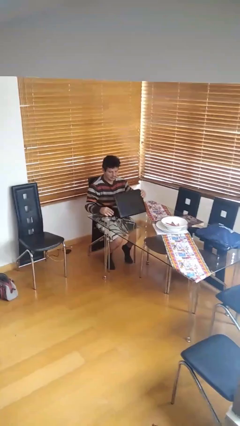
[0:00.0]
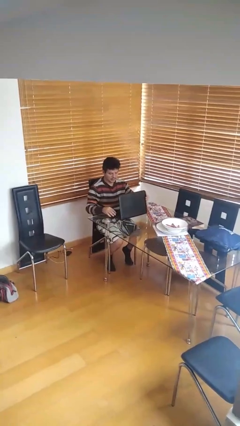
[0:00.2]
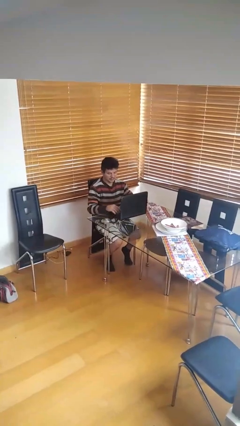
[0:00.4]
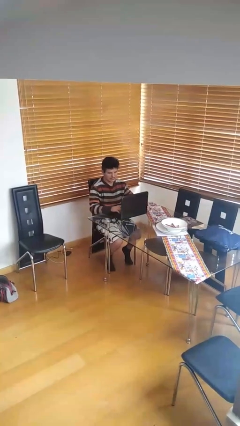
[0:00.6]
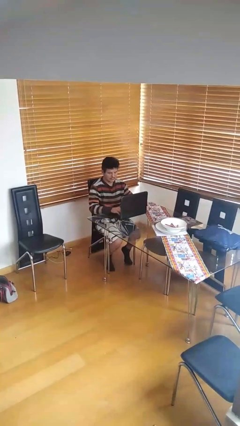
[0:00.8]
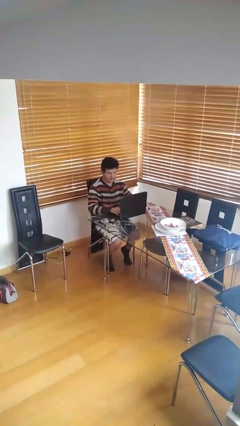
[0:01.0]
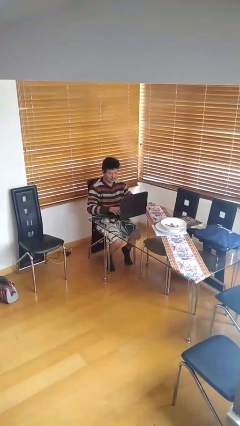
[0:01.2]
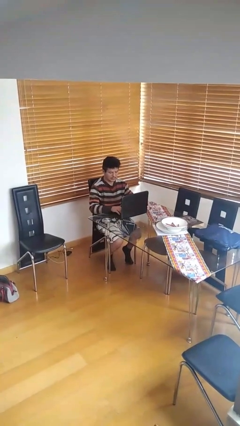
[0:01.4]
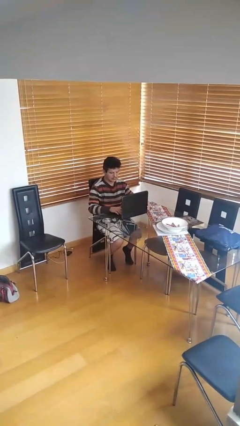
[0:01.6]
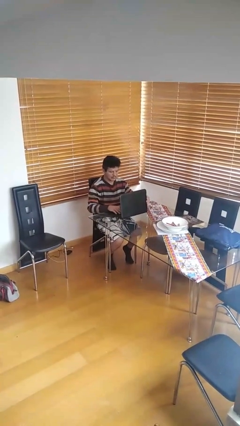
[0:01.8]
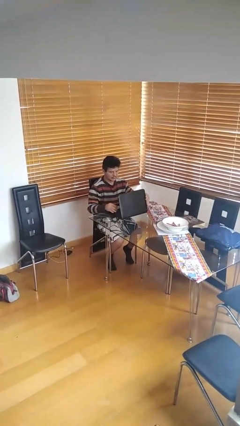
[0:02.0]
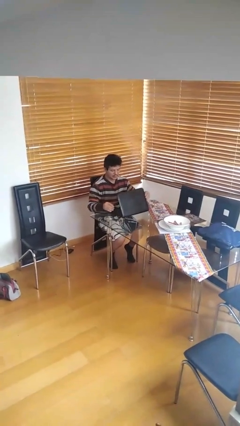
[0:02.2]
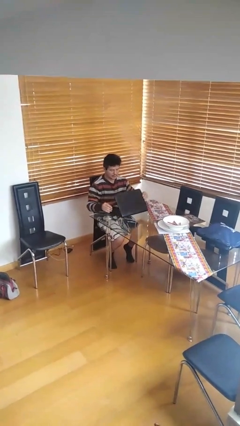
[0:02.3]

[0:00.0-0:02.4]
person interacts with laptop

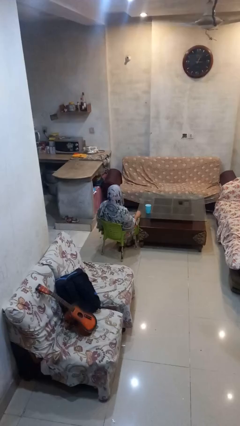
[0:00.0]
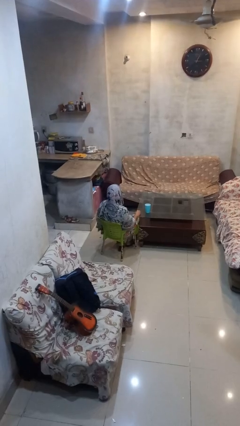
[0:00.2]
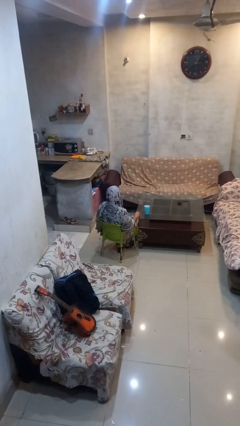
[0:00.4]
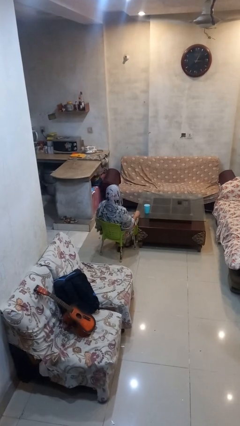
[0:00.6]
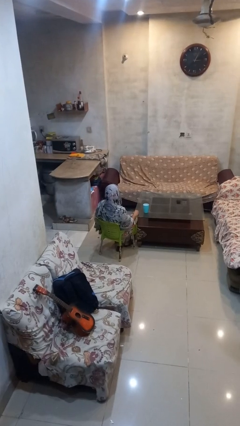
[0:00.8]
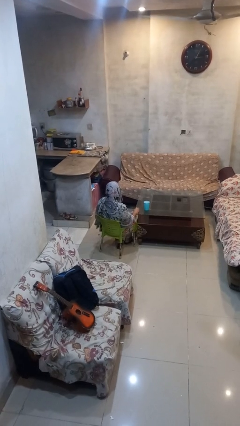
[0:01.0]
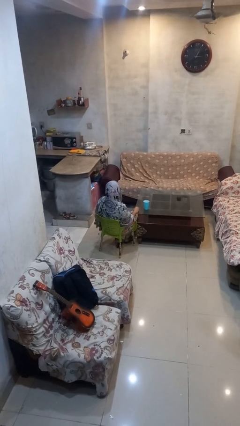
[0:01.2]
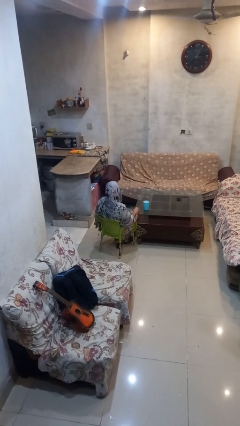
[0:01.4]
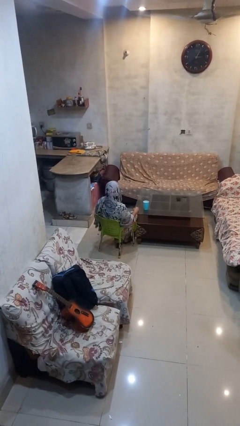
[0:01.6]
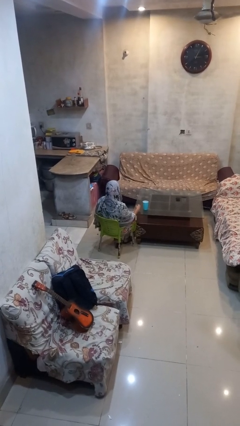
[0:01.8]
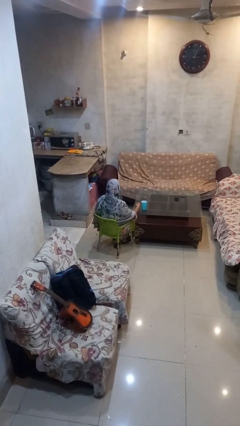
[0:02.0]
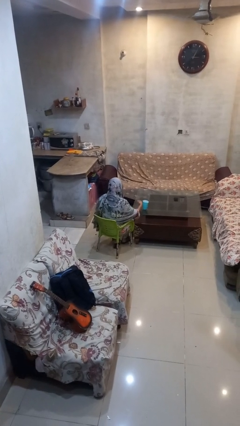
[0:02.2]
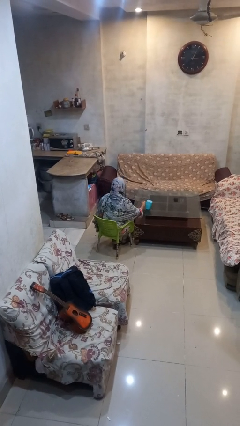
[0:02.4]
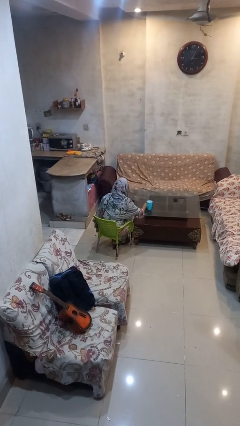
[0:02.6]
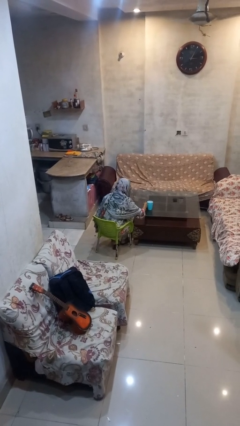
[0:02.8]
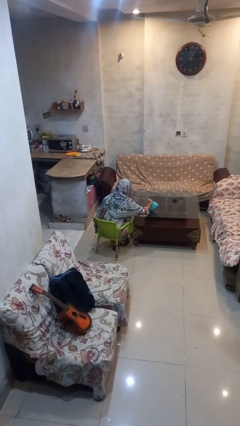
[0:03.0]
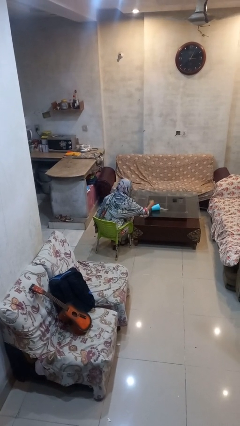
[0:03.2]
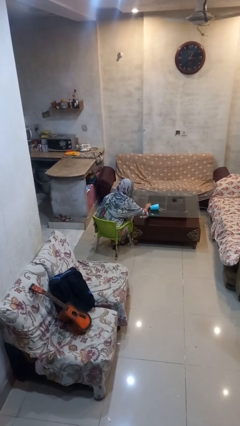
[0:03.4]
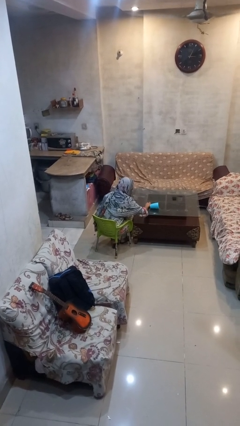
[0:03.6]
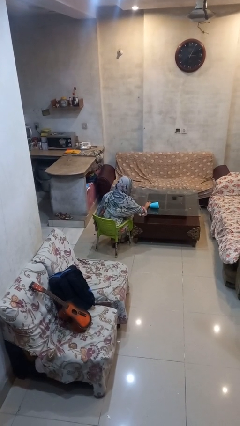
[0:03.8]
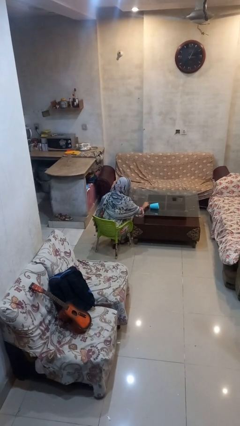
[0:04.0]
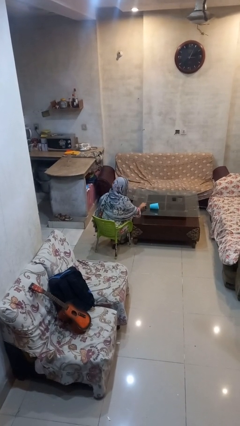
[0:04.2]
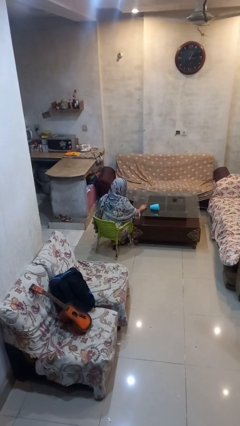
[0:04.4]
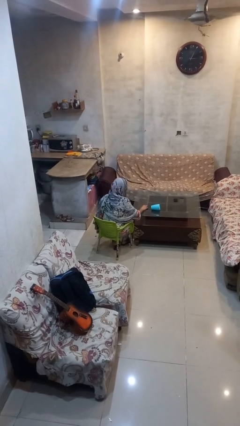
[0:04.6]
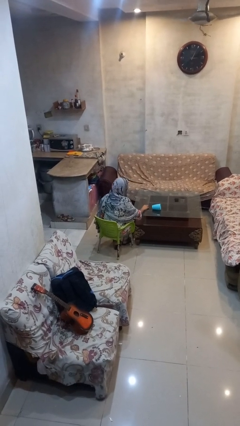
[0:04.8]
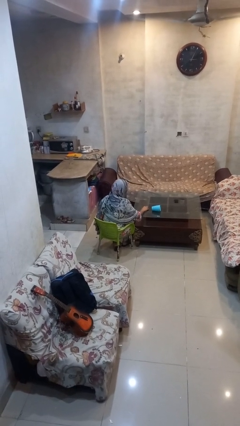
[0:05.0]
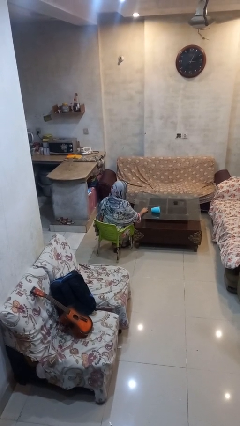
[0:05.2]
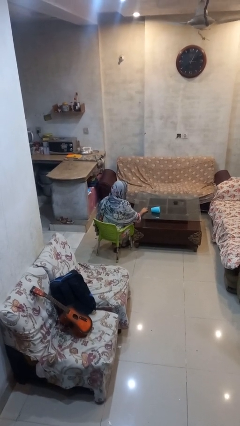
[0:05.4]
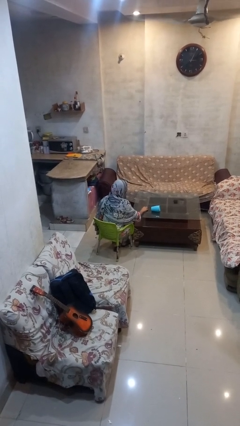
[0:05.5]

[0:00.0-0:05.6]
person spills on table

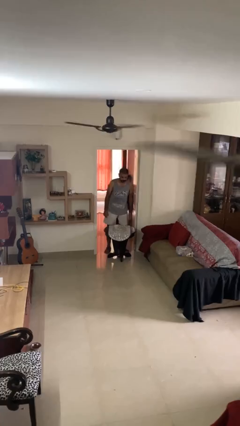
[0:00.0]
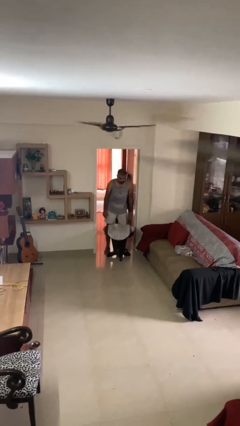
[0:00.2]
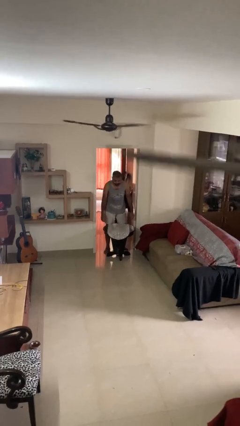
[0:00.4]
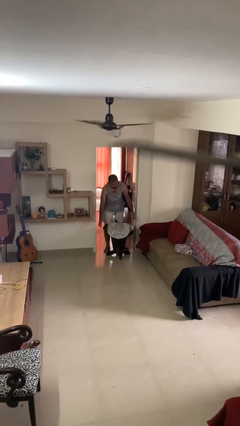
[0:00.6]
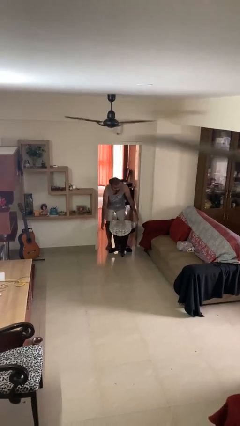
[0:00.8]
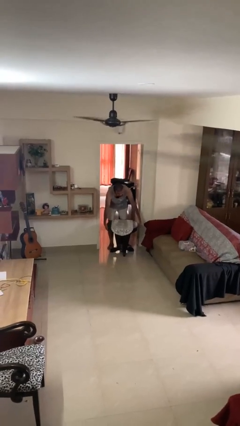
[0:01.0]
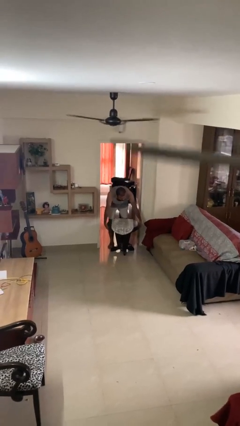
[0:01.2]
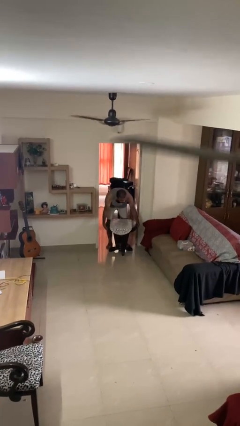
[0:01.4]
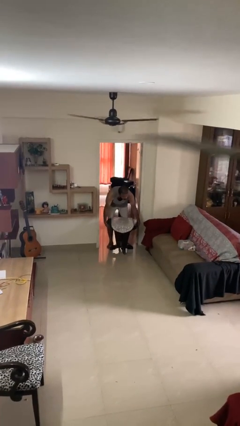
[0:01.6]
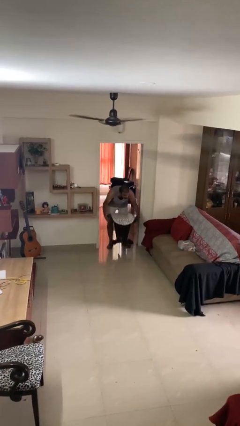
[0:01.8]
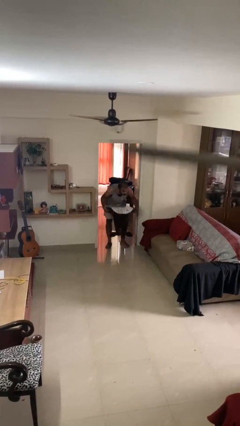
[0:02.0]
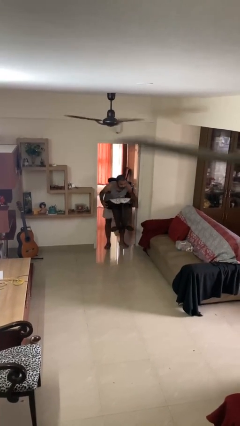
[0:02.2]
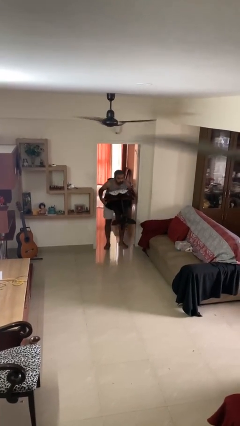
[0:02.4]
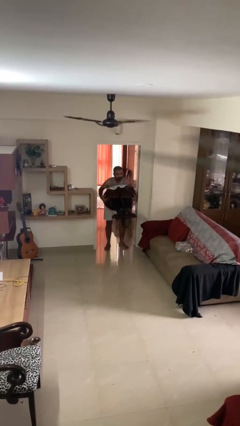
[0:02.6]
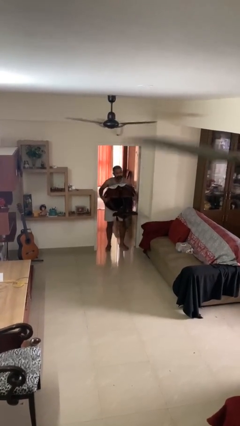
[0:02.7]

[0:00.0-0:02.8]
person picks up object from floor

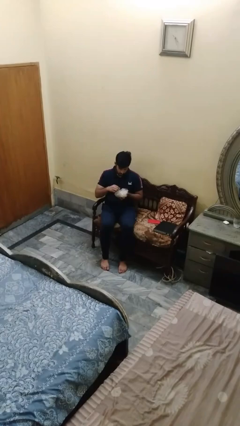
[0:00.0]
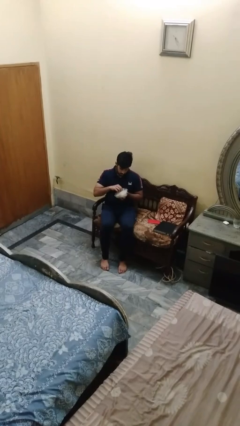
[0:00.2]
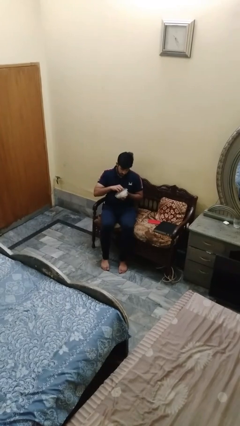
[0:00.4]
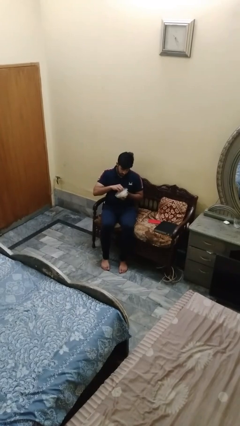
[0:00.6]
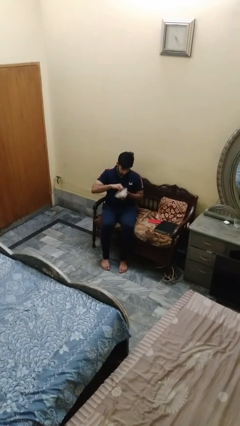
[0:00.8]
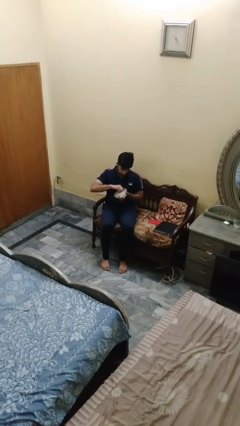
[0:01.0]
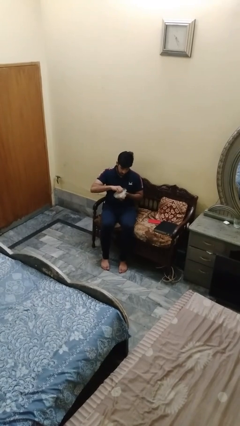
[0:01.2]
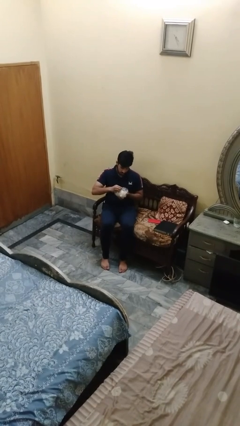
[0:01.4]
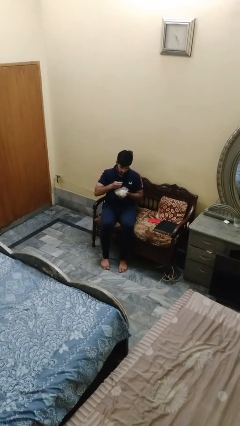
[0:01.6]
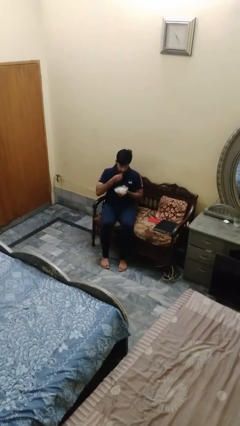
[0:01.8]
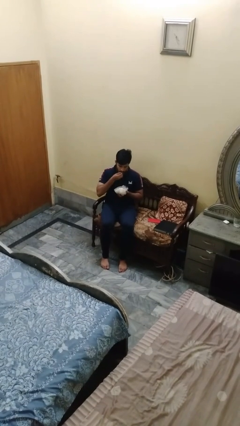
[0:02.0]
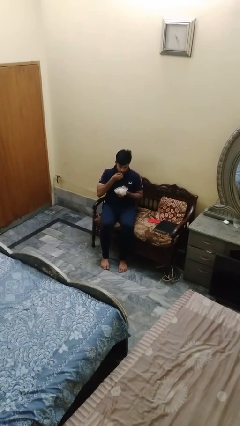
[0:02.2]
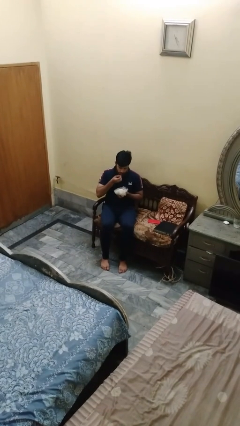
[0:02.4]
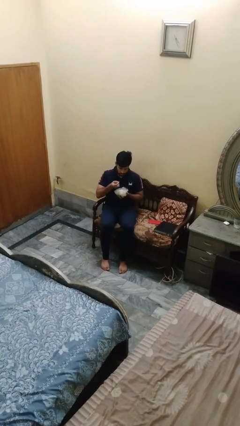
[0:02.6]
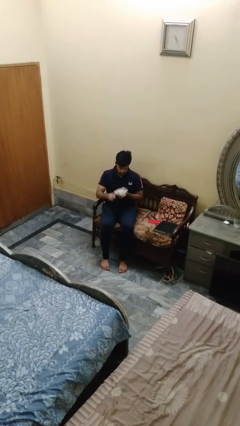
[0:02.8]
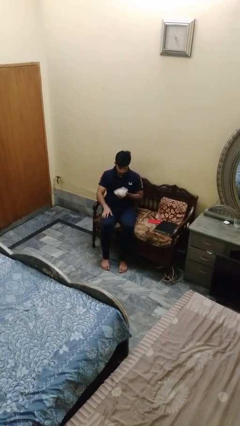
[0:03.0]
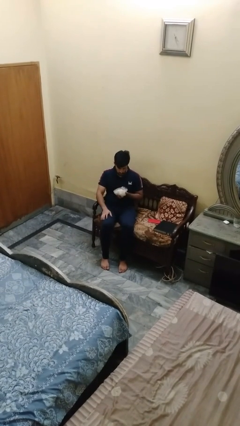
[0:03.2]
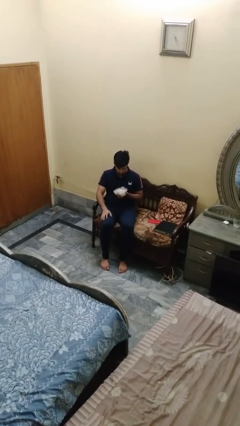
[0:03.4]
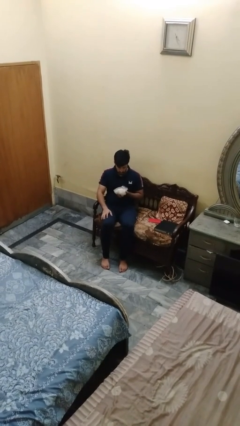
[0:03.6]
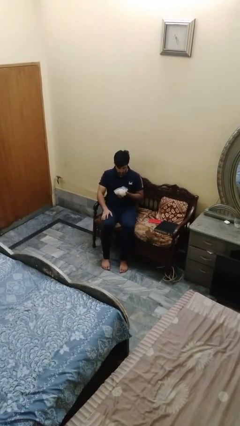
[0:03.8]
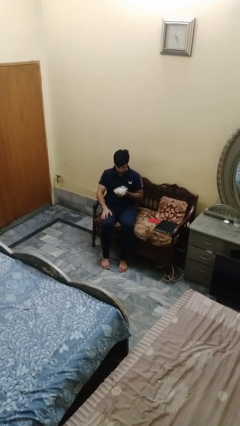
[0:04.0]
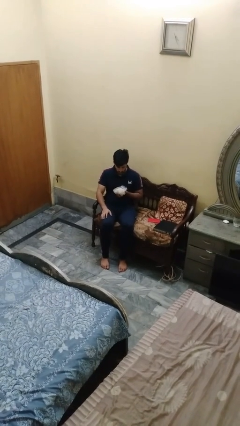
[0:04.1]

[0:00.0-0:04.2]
person eats snack from bag

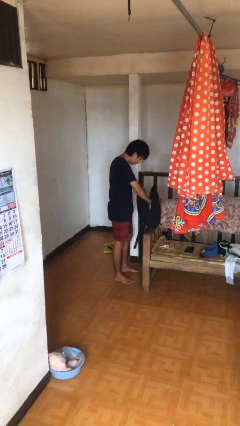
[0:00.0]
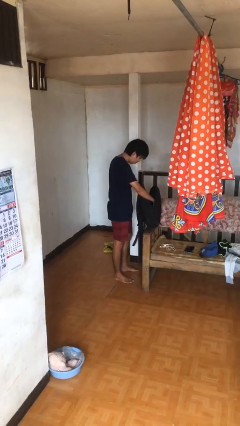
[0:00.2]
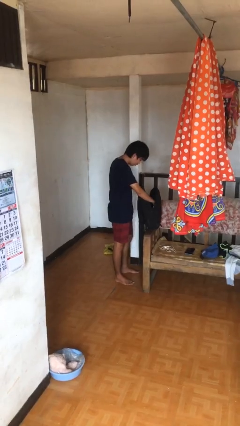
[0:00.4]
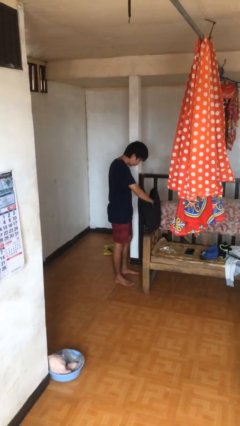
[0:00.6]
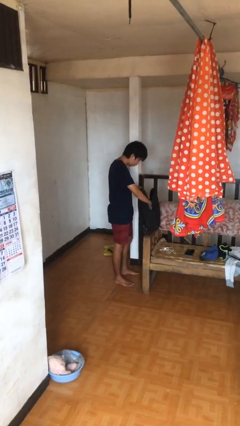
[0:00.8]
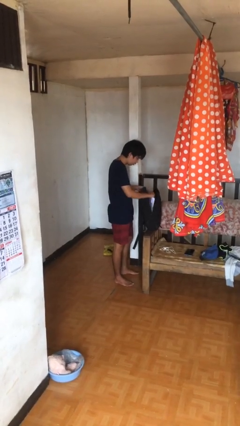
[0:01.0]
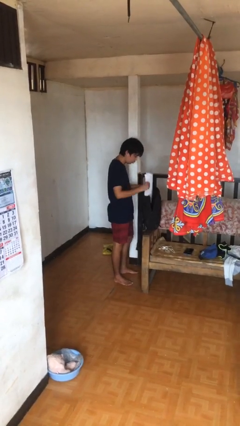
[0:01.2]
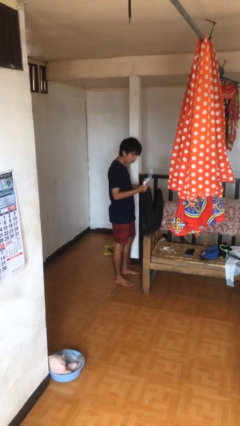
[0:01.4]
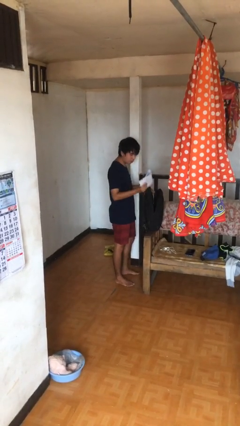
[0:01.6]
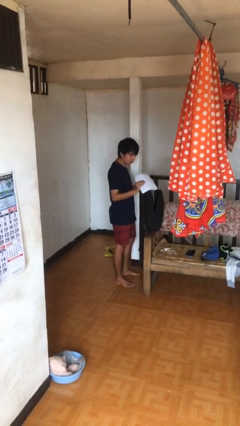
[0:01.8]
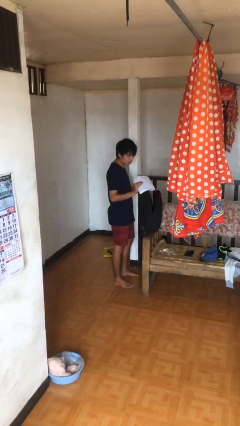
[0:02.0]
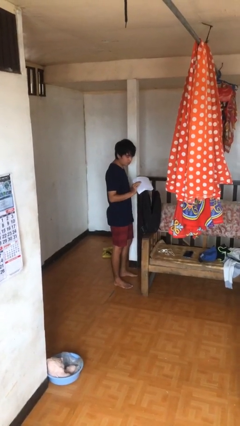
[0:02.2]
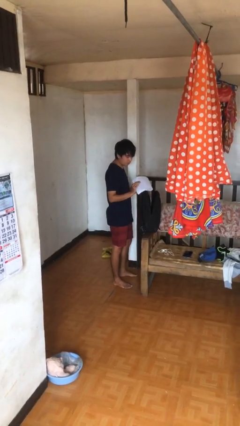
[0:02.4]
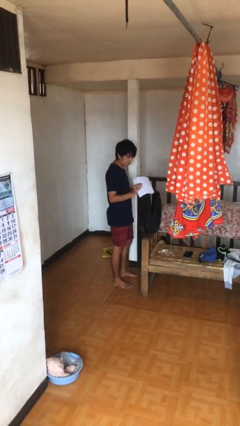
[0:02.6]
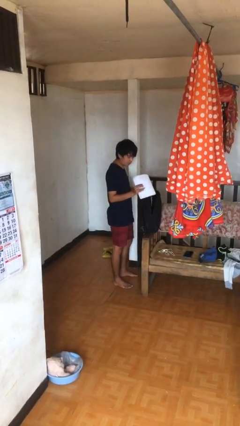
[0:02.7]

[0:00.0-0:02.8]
person takes object from backpack
